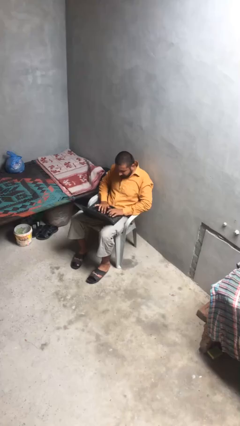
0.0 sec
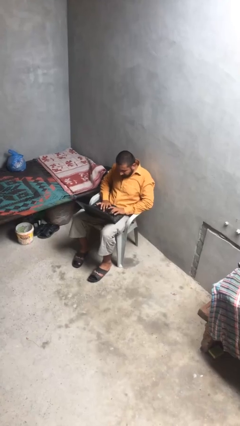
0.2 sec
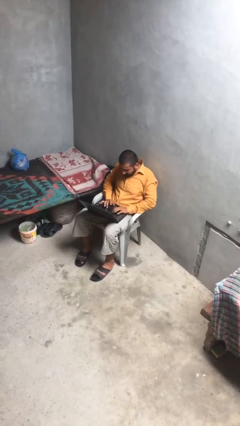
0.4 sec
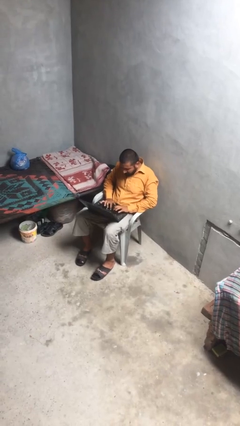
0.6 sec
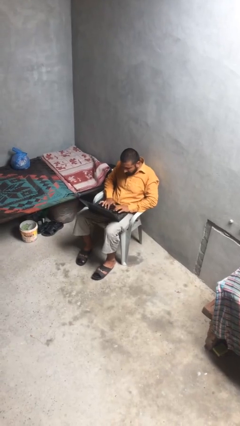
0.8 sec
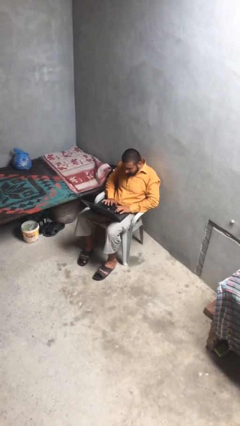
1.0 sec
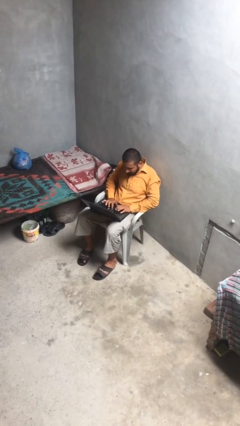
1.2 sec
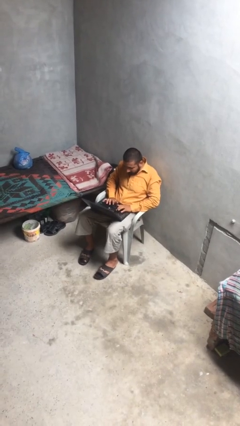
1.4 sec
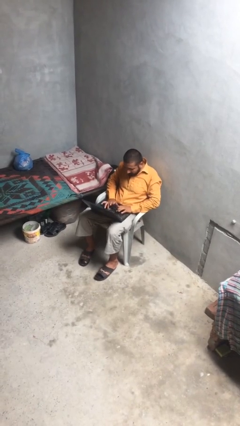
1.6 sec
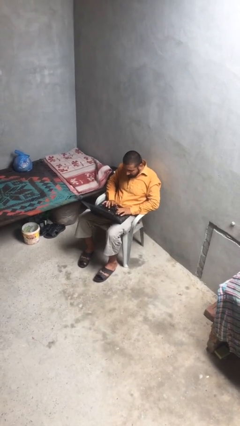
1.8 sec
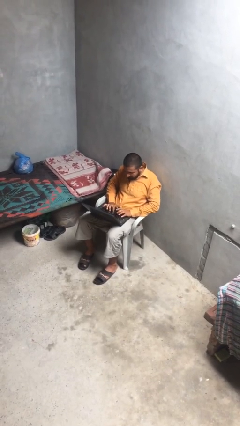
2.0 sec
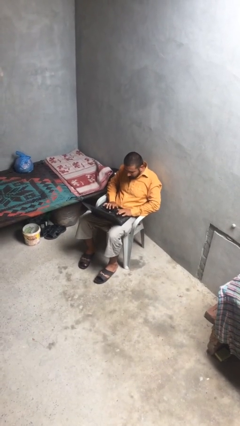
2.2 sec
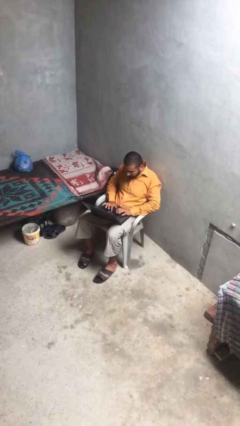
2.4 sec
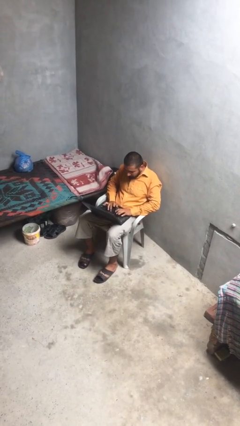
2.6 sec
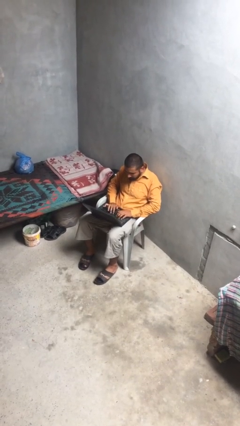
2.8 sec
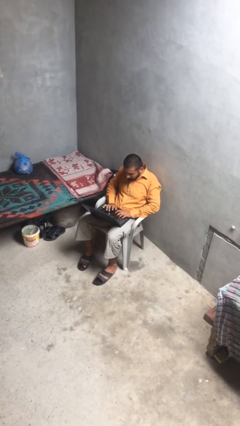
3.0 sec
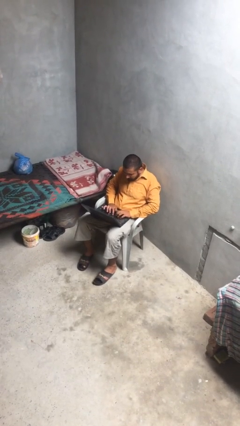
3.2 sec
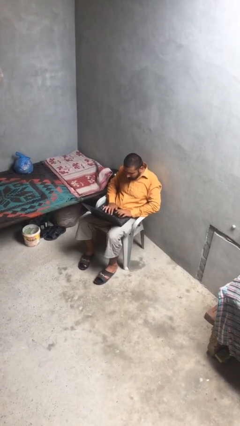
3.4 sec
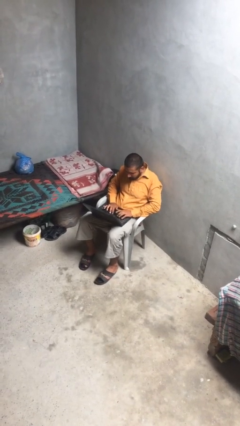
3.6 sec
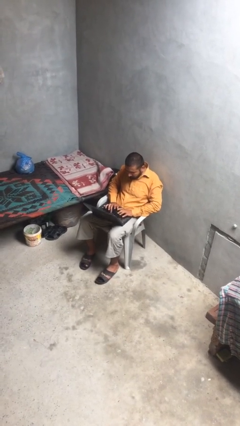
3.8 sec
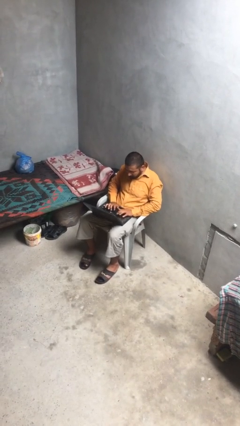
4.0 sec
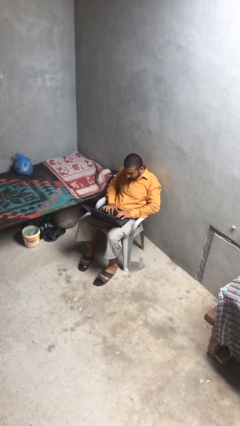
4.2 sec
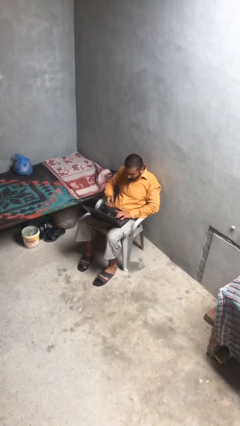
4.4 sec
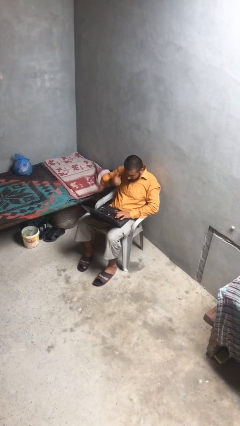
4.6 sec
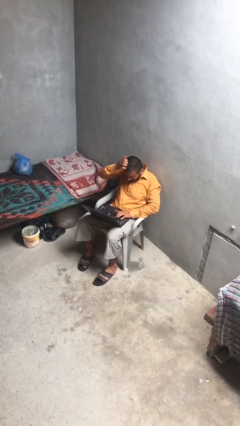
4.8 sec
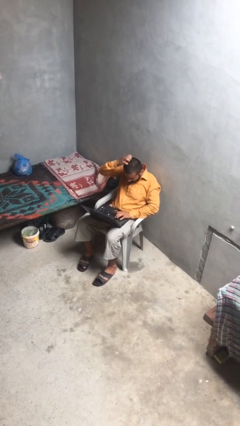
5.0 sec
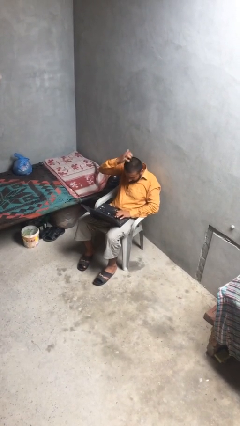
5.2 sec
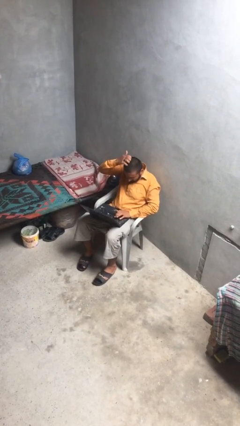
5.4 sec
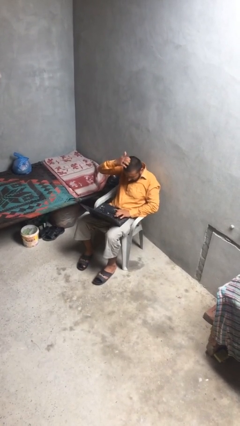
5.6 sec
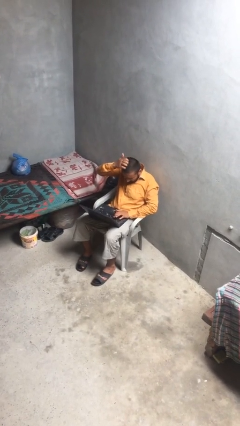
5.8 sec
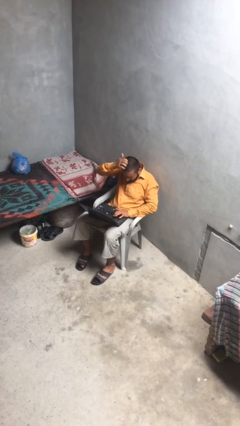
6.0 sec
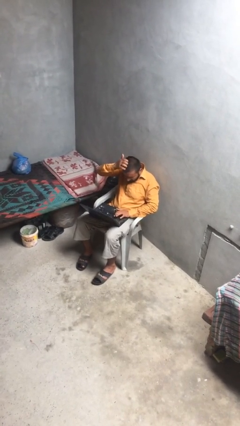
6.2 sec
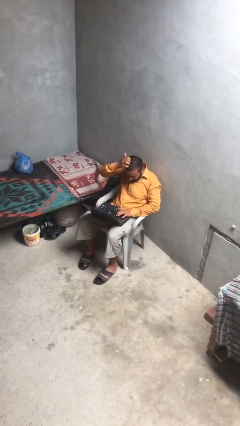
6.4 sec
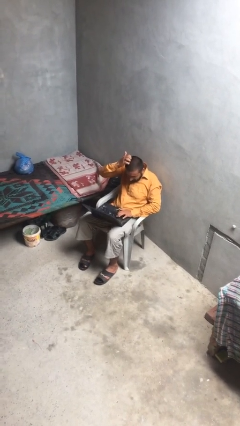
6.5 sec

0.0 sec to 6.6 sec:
person interacts with laptop

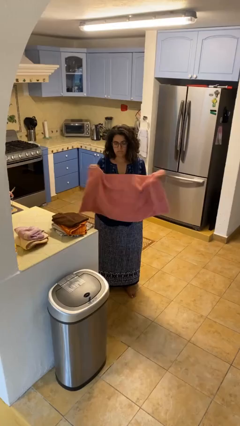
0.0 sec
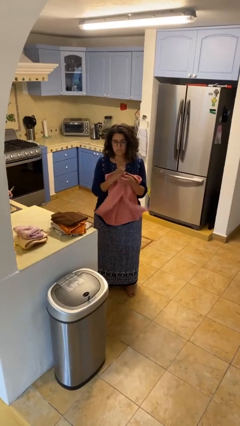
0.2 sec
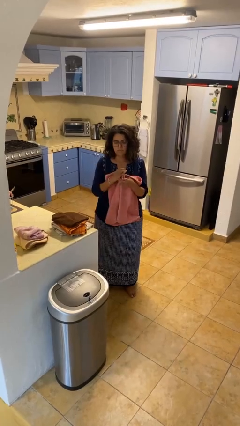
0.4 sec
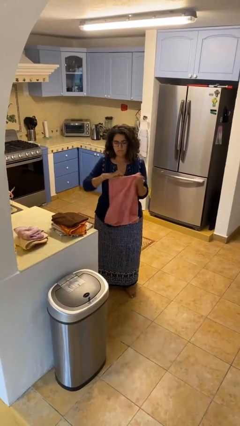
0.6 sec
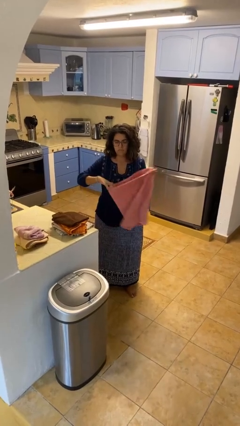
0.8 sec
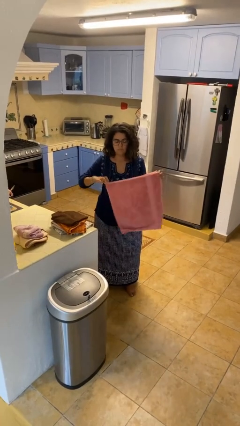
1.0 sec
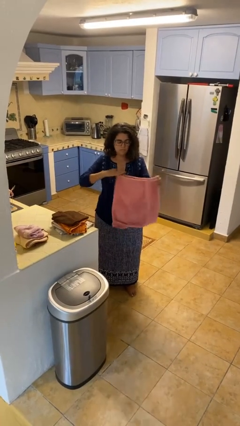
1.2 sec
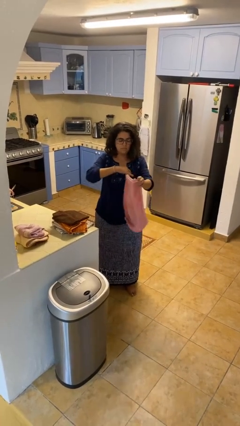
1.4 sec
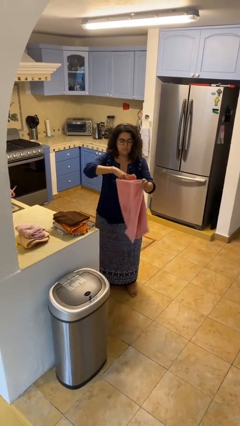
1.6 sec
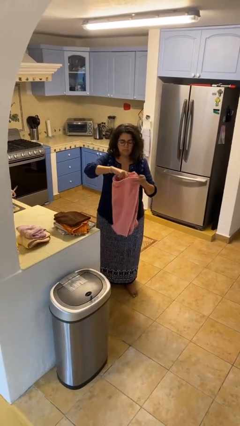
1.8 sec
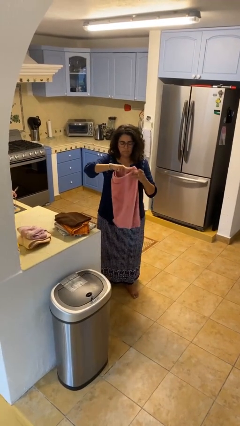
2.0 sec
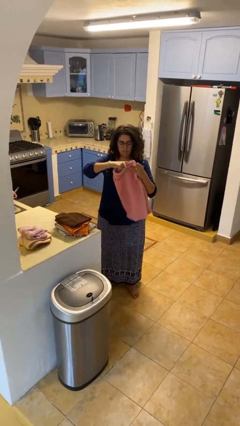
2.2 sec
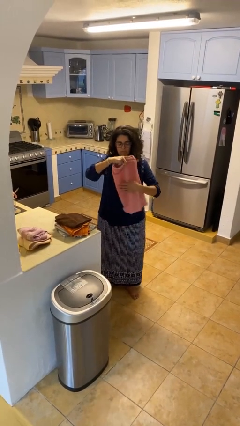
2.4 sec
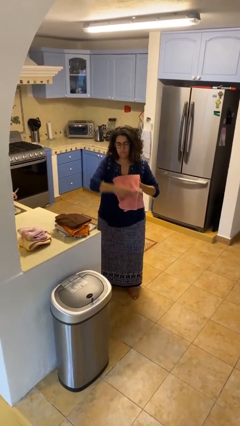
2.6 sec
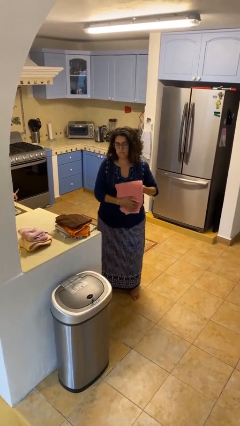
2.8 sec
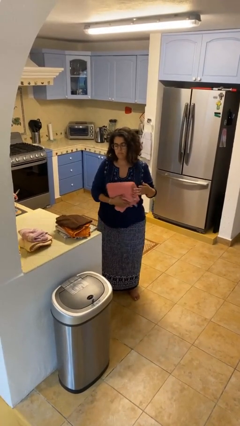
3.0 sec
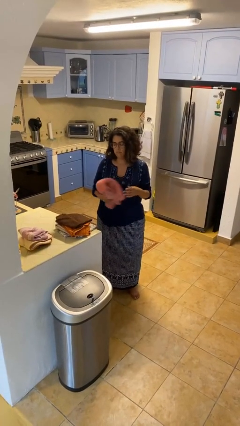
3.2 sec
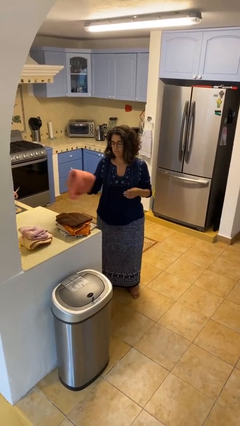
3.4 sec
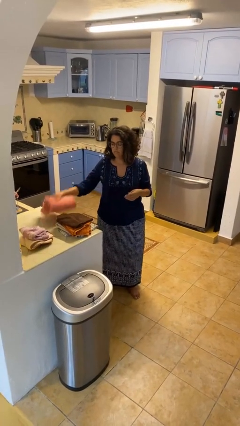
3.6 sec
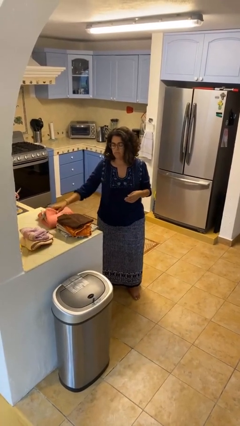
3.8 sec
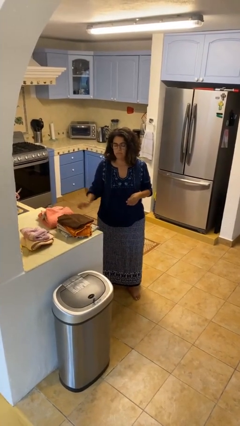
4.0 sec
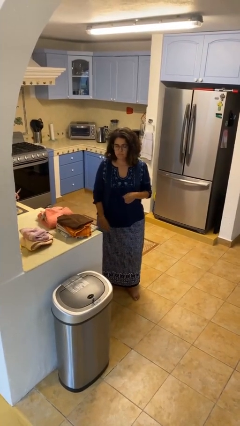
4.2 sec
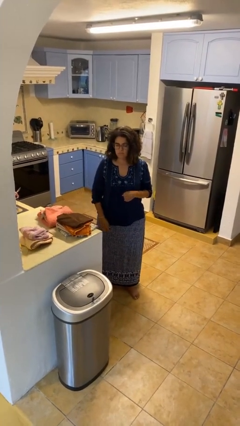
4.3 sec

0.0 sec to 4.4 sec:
person folds towel

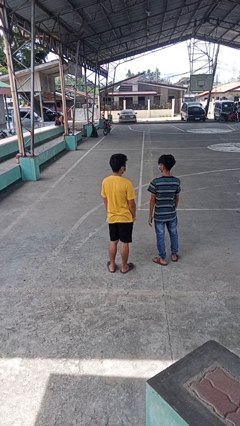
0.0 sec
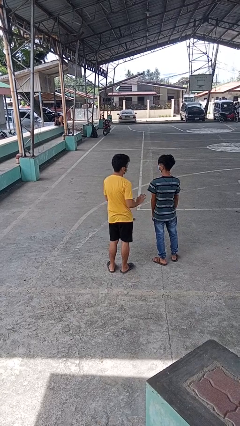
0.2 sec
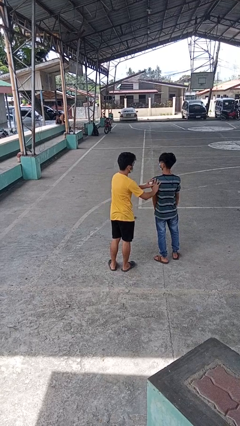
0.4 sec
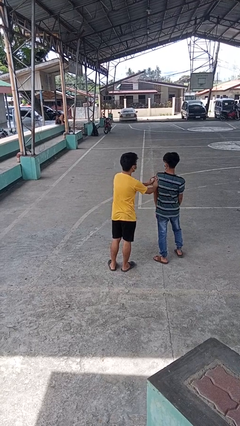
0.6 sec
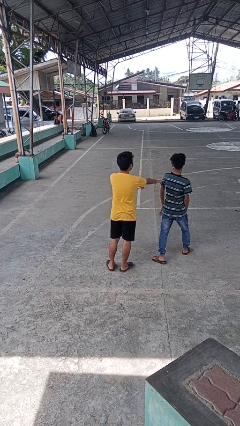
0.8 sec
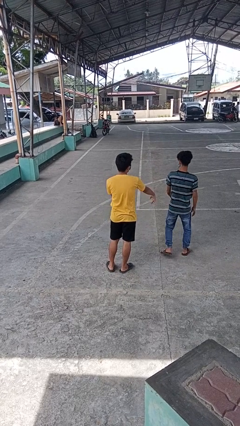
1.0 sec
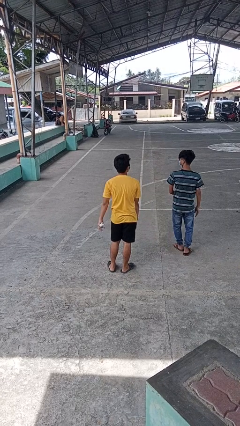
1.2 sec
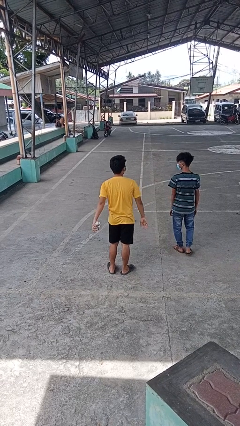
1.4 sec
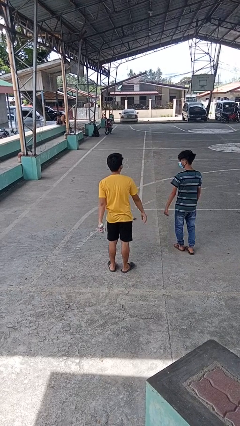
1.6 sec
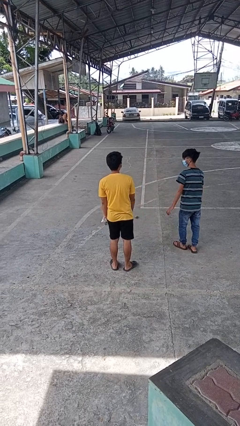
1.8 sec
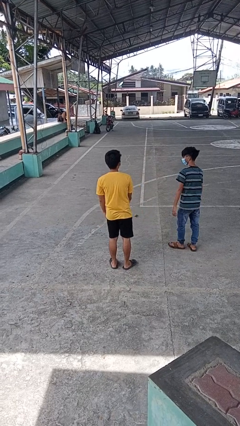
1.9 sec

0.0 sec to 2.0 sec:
person shoves person

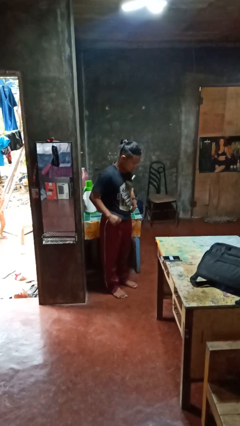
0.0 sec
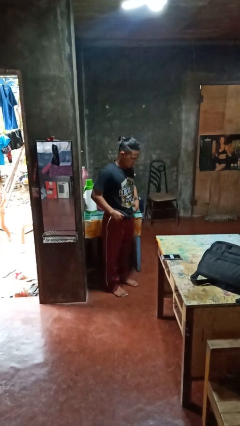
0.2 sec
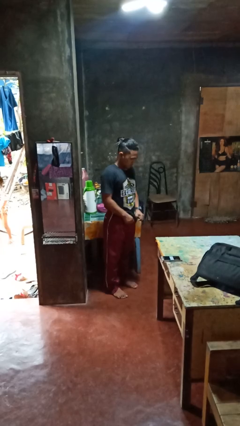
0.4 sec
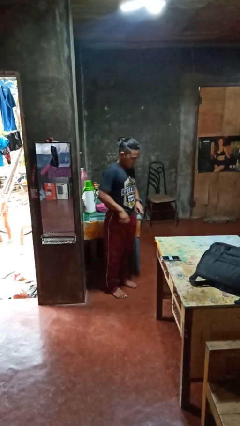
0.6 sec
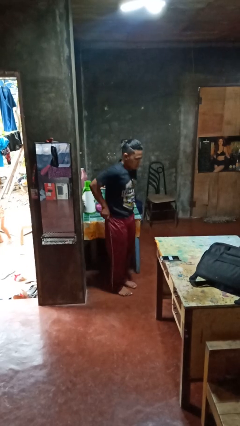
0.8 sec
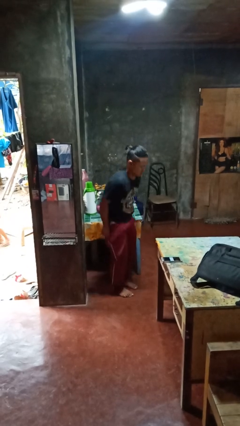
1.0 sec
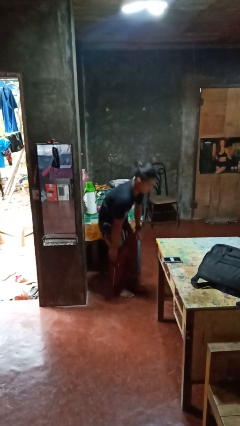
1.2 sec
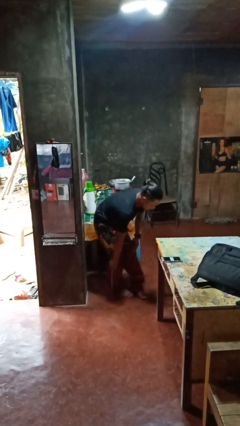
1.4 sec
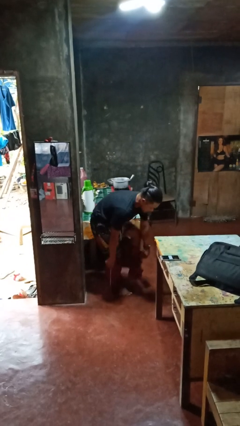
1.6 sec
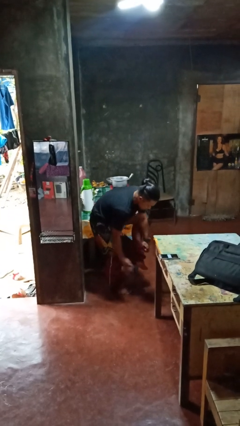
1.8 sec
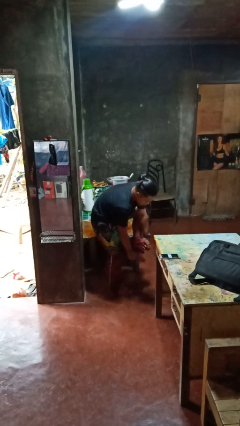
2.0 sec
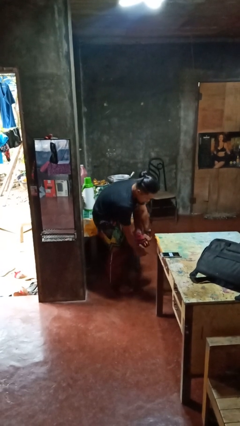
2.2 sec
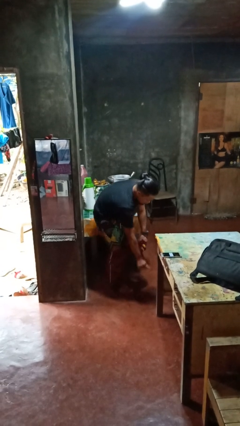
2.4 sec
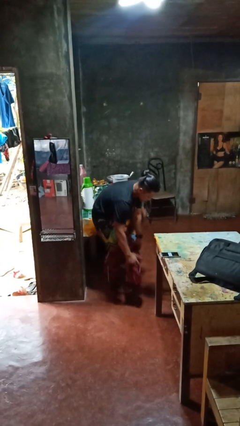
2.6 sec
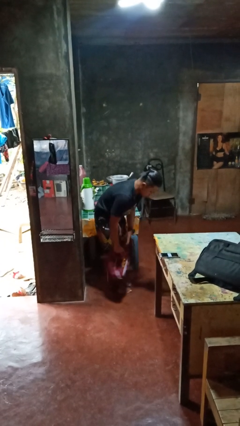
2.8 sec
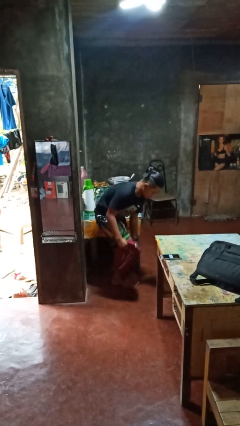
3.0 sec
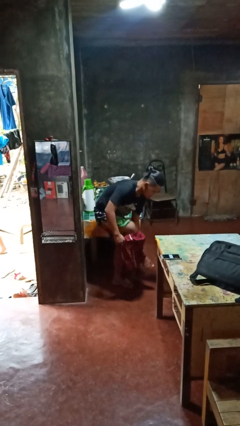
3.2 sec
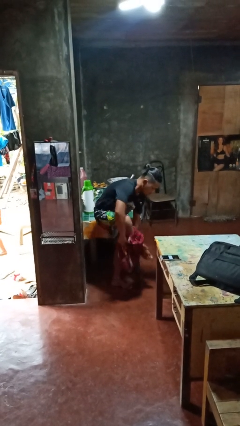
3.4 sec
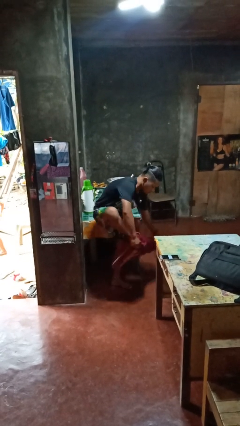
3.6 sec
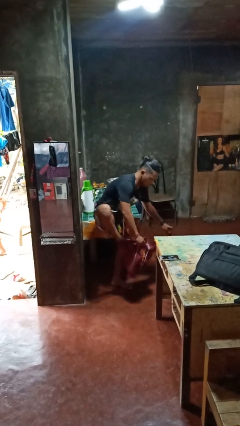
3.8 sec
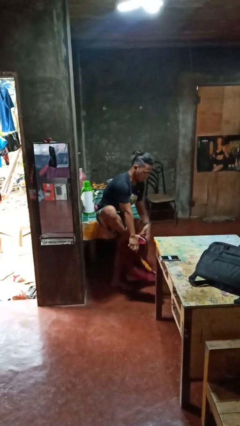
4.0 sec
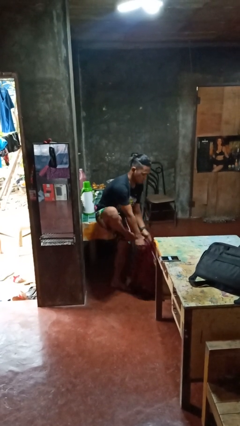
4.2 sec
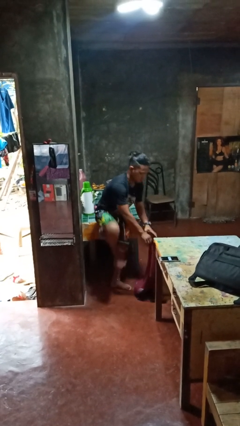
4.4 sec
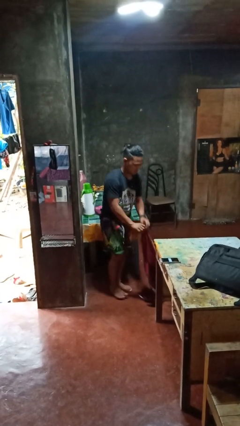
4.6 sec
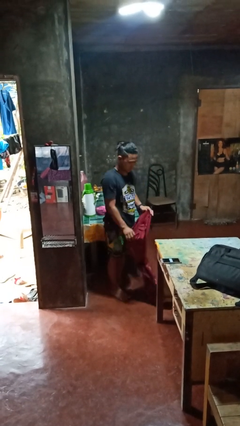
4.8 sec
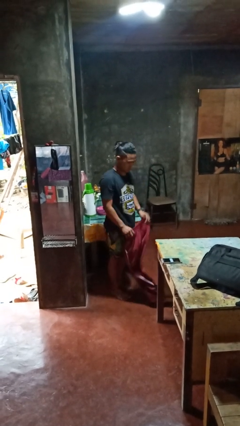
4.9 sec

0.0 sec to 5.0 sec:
person takes off pants
